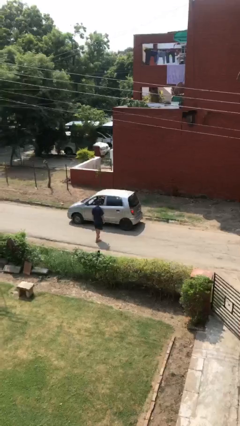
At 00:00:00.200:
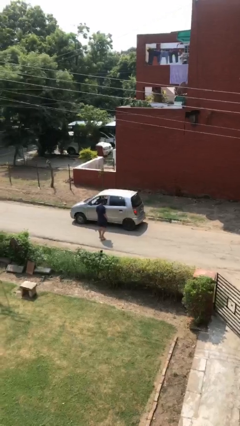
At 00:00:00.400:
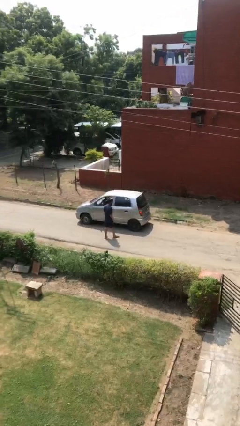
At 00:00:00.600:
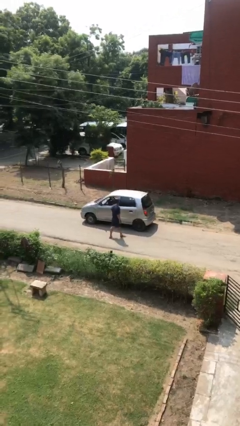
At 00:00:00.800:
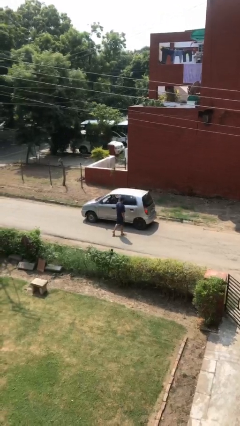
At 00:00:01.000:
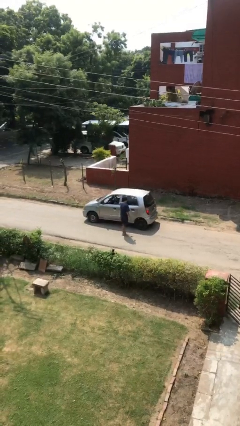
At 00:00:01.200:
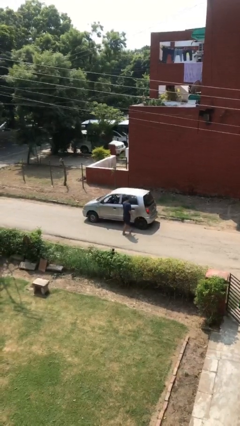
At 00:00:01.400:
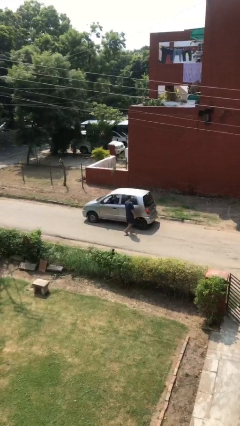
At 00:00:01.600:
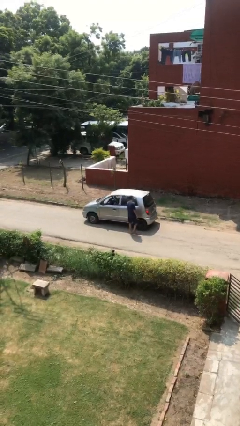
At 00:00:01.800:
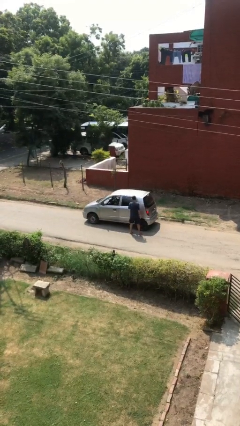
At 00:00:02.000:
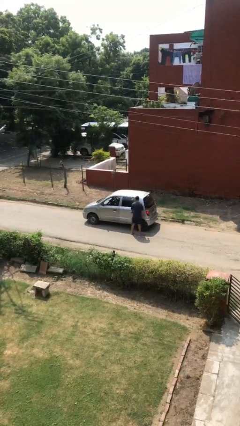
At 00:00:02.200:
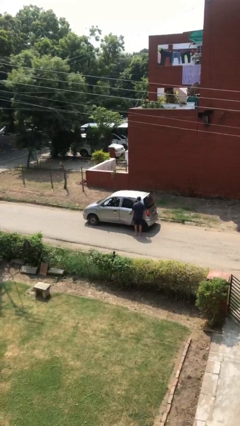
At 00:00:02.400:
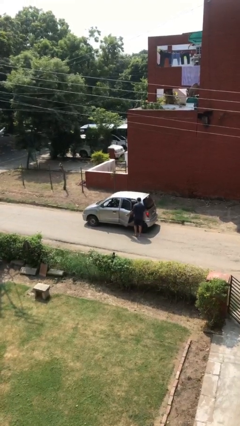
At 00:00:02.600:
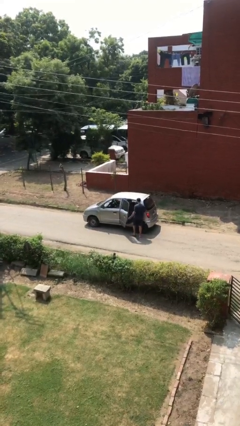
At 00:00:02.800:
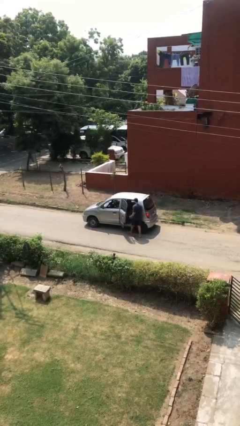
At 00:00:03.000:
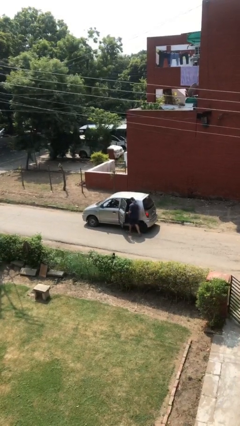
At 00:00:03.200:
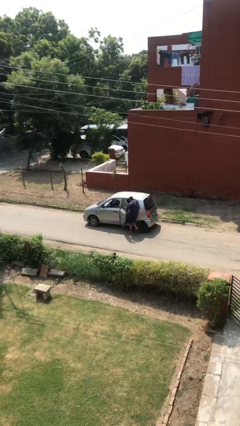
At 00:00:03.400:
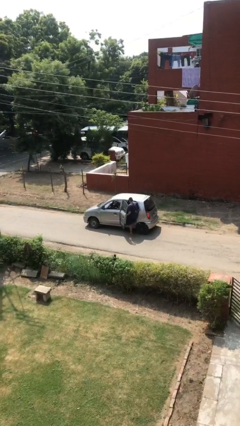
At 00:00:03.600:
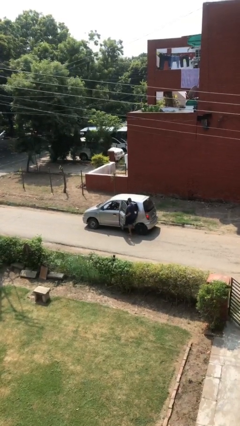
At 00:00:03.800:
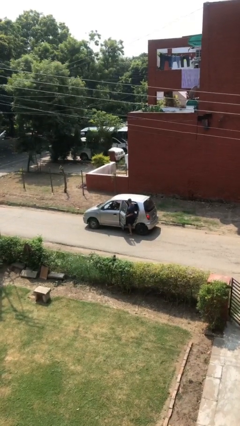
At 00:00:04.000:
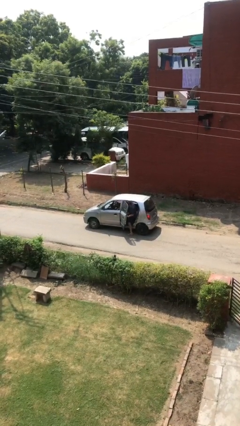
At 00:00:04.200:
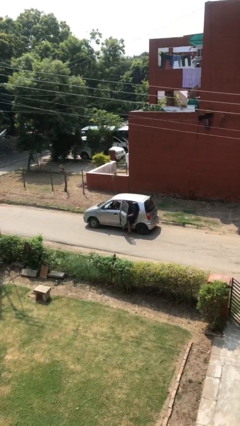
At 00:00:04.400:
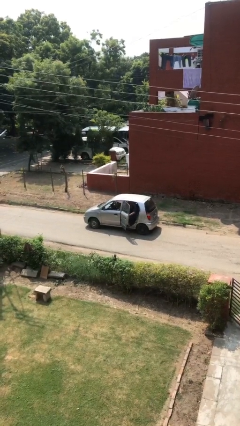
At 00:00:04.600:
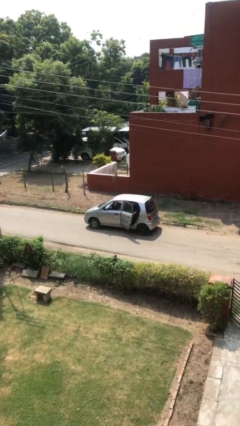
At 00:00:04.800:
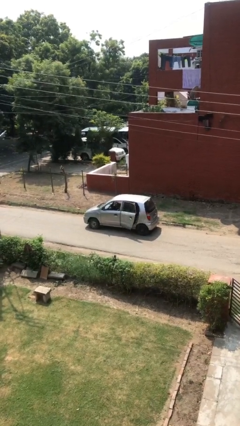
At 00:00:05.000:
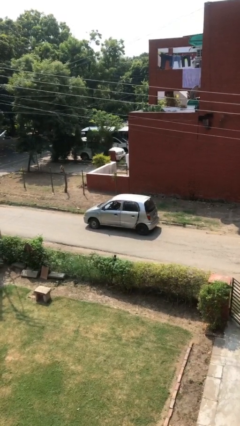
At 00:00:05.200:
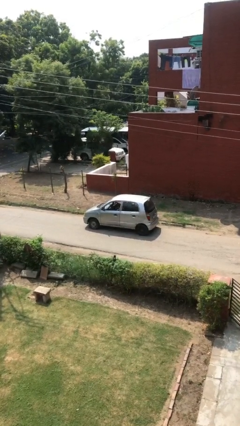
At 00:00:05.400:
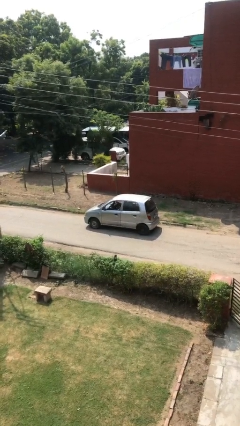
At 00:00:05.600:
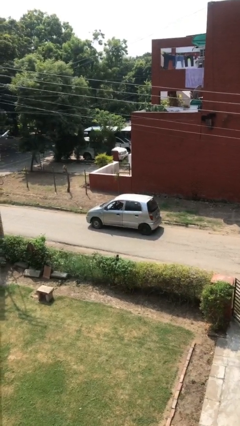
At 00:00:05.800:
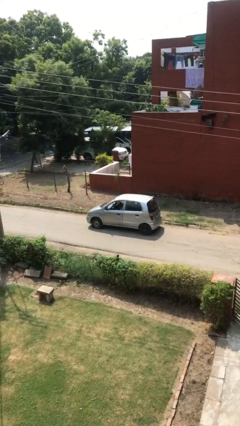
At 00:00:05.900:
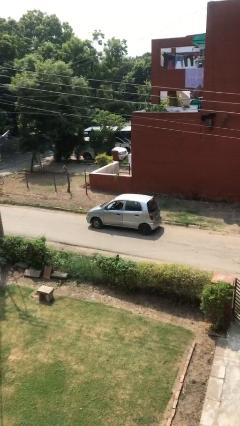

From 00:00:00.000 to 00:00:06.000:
car picks up person

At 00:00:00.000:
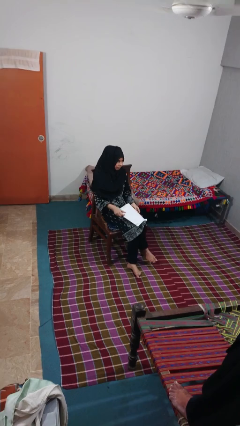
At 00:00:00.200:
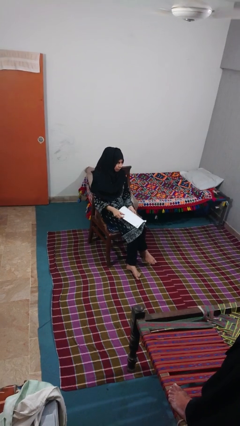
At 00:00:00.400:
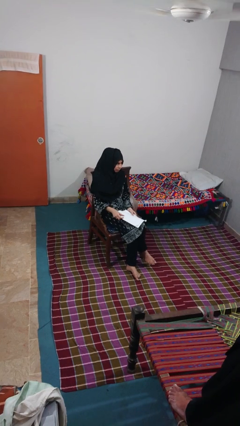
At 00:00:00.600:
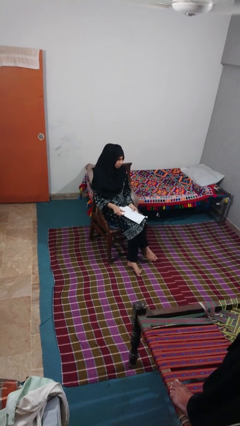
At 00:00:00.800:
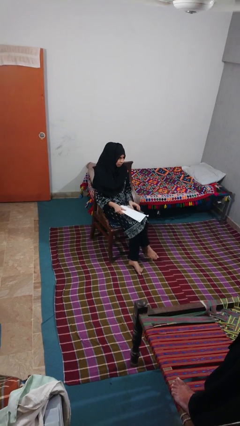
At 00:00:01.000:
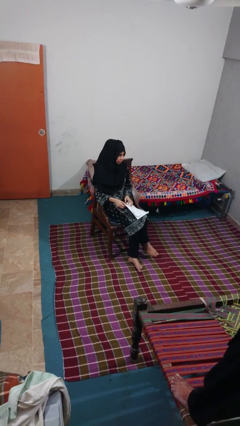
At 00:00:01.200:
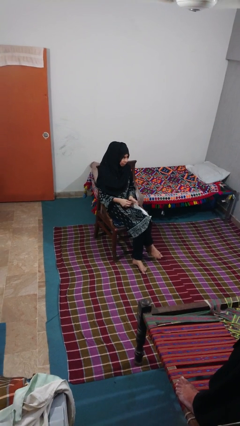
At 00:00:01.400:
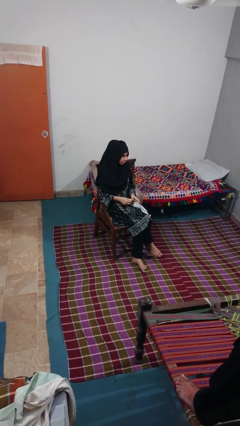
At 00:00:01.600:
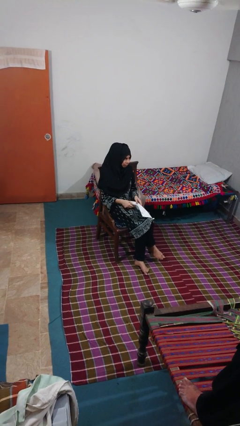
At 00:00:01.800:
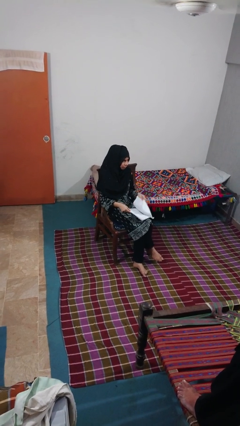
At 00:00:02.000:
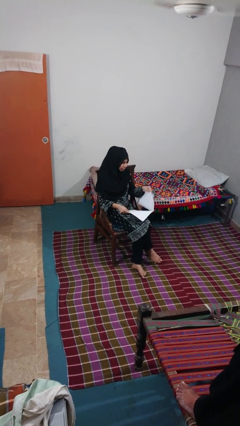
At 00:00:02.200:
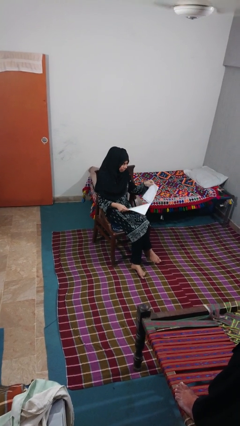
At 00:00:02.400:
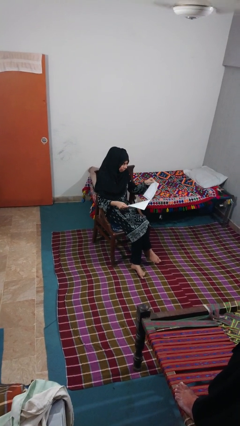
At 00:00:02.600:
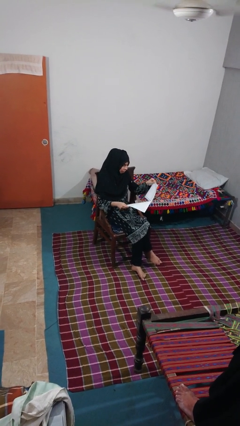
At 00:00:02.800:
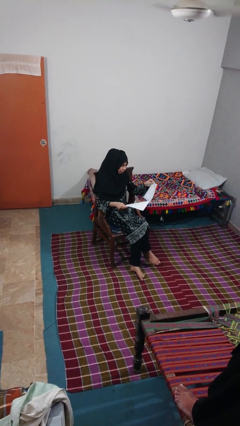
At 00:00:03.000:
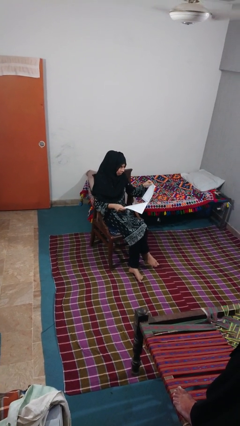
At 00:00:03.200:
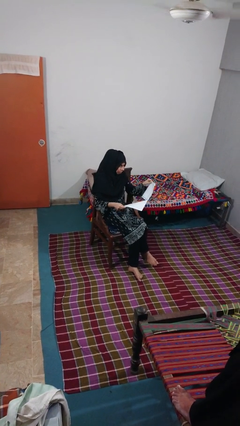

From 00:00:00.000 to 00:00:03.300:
person reads newspaper

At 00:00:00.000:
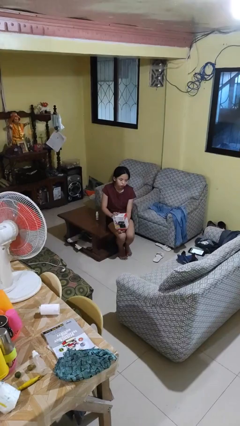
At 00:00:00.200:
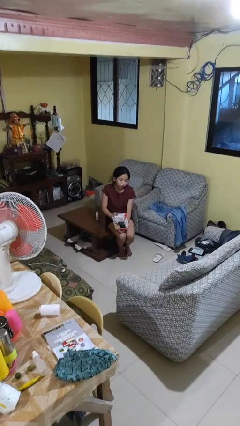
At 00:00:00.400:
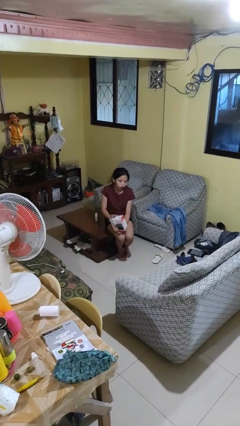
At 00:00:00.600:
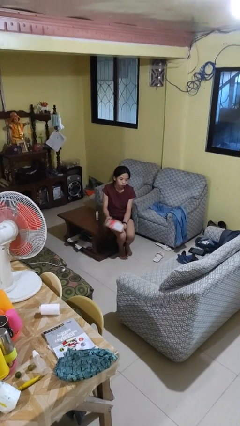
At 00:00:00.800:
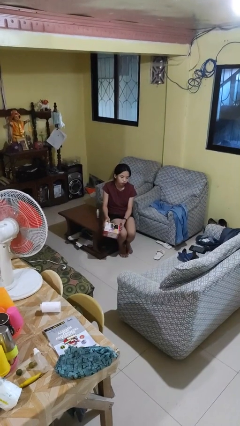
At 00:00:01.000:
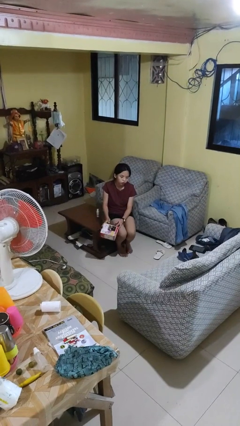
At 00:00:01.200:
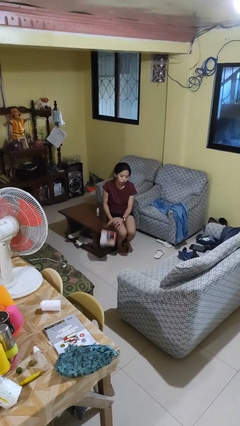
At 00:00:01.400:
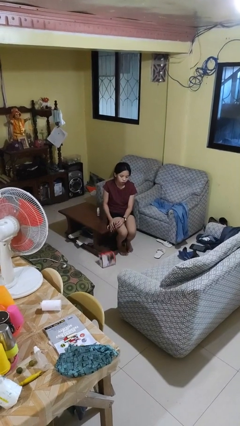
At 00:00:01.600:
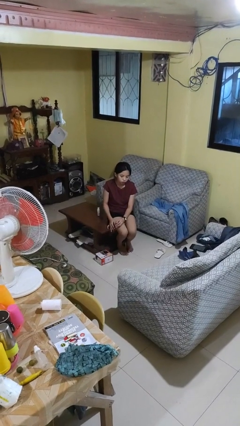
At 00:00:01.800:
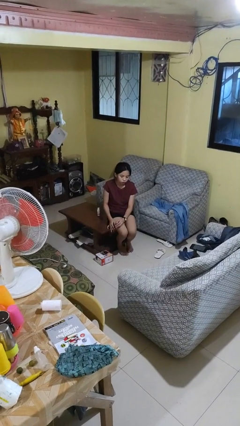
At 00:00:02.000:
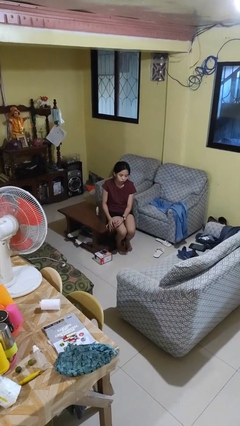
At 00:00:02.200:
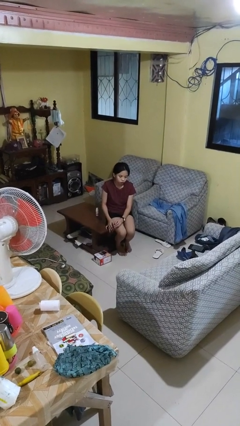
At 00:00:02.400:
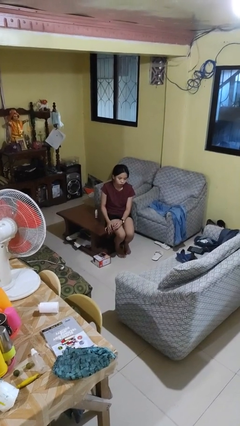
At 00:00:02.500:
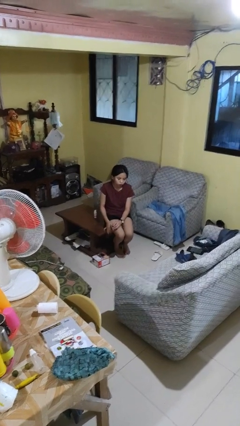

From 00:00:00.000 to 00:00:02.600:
person drops object

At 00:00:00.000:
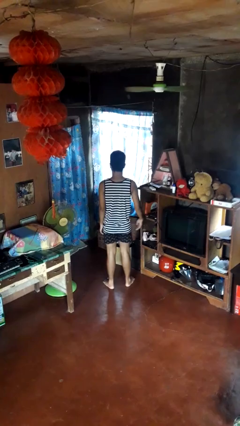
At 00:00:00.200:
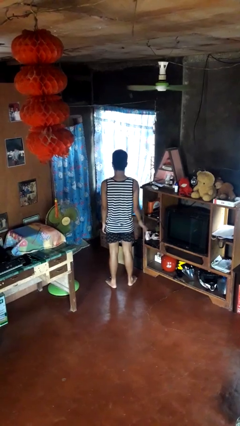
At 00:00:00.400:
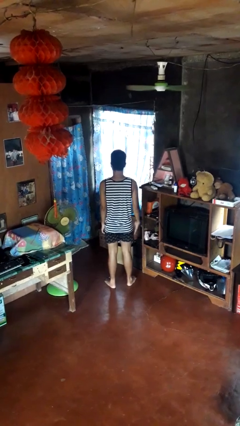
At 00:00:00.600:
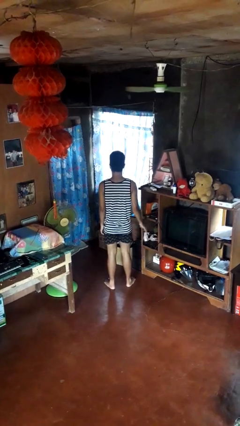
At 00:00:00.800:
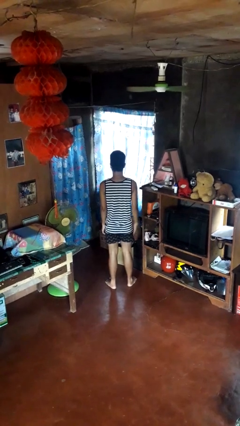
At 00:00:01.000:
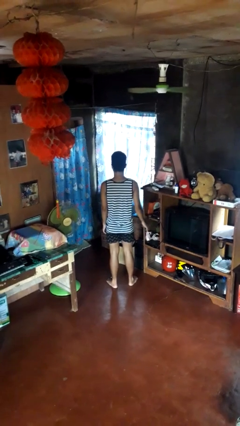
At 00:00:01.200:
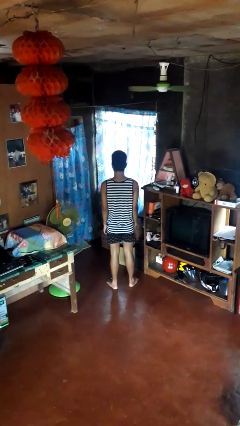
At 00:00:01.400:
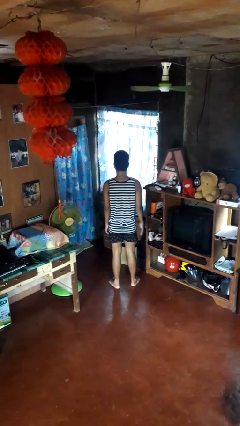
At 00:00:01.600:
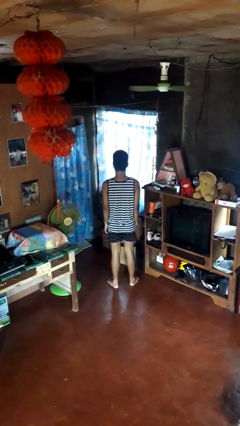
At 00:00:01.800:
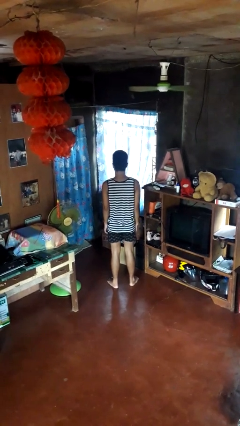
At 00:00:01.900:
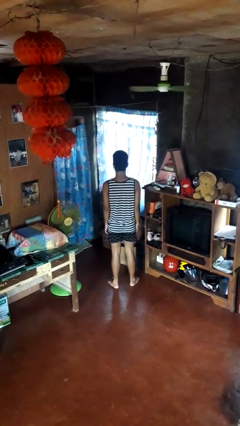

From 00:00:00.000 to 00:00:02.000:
person slaps hands on thighs

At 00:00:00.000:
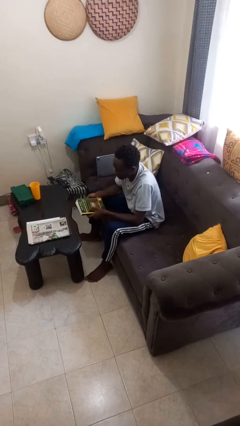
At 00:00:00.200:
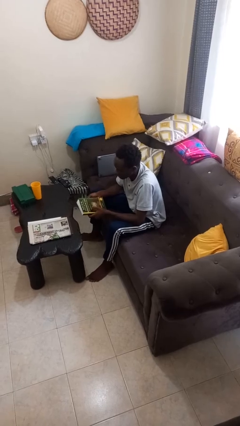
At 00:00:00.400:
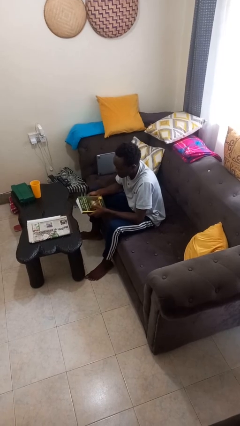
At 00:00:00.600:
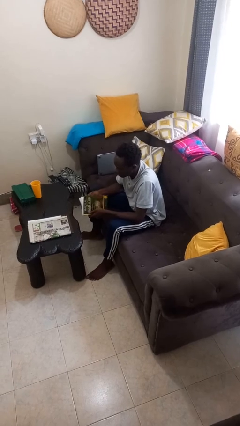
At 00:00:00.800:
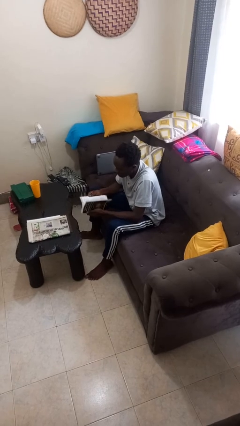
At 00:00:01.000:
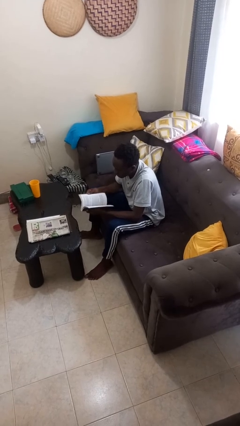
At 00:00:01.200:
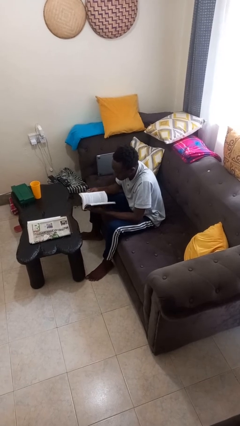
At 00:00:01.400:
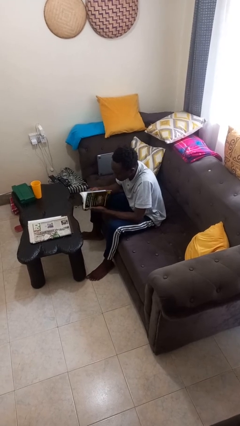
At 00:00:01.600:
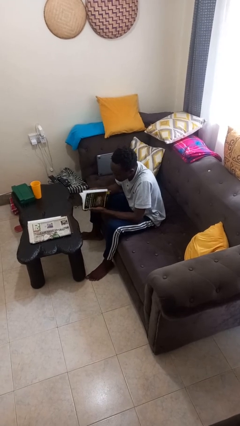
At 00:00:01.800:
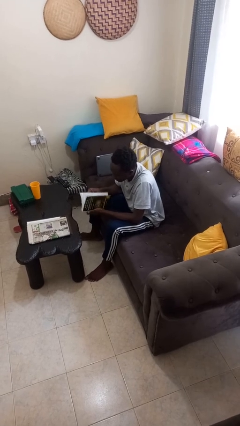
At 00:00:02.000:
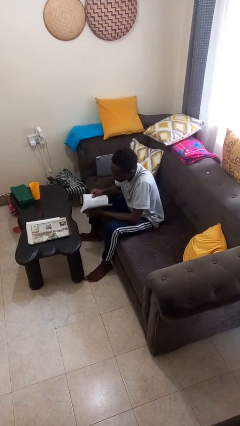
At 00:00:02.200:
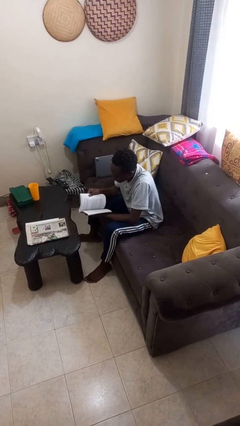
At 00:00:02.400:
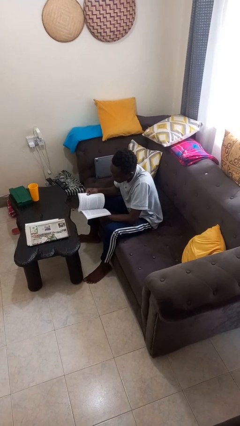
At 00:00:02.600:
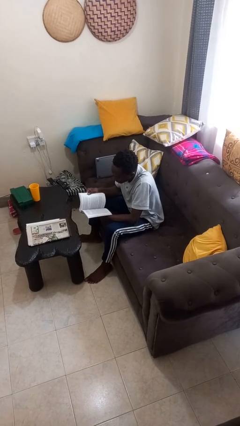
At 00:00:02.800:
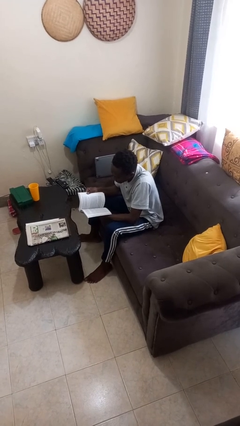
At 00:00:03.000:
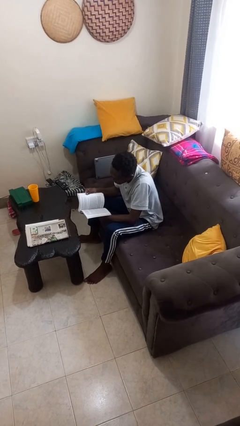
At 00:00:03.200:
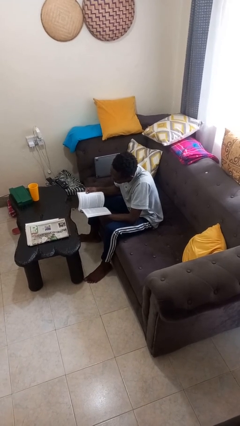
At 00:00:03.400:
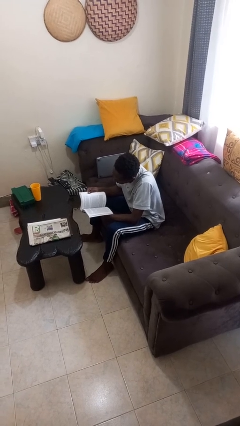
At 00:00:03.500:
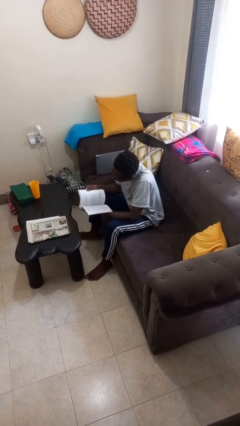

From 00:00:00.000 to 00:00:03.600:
person reads book
